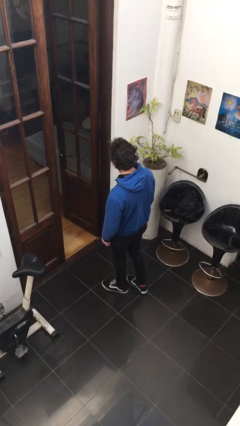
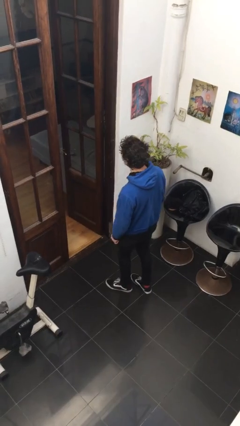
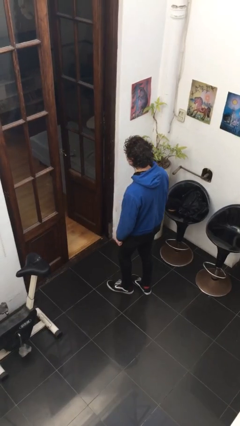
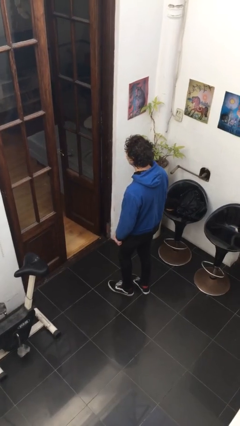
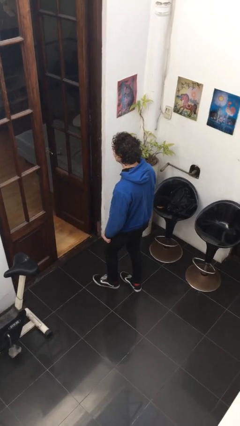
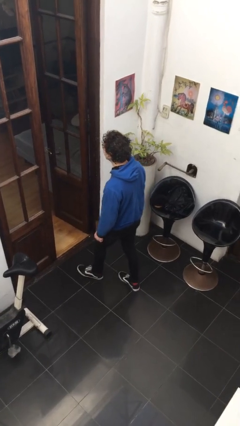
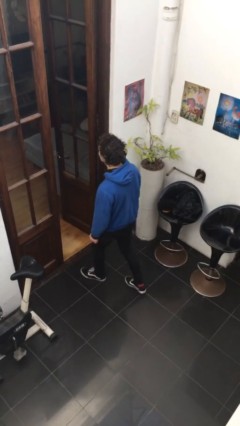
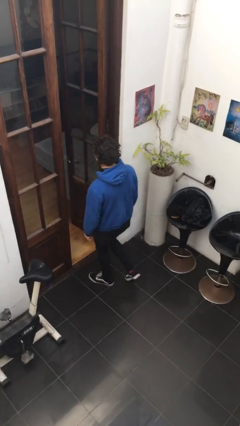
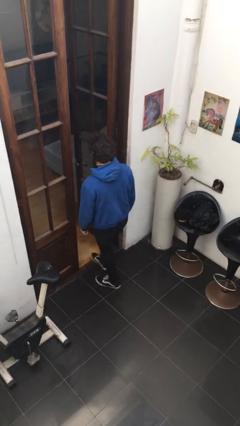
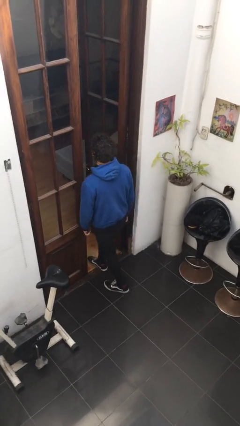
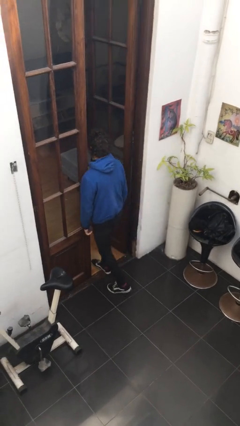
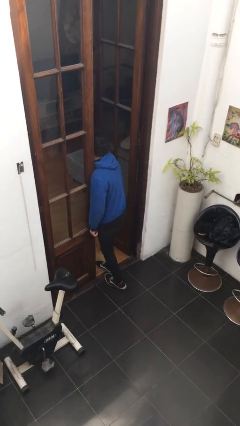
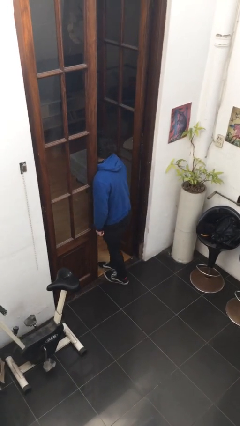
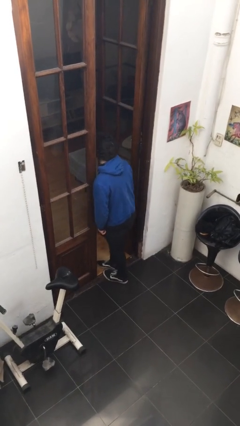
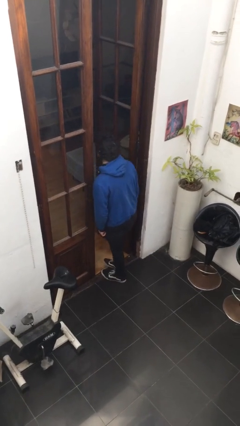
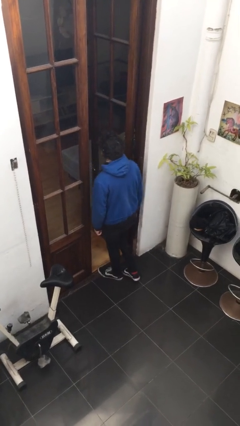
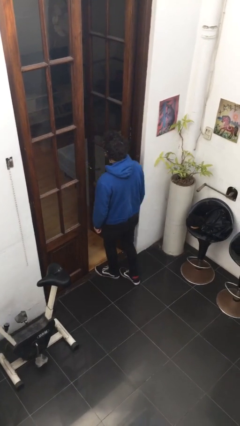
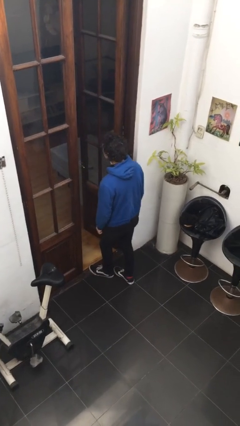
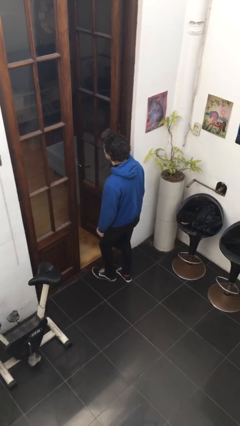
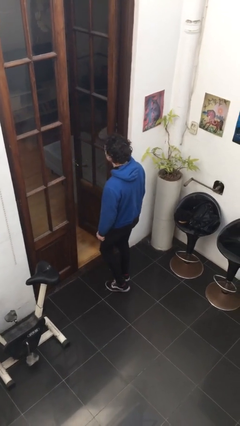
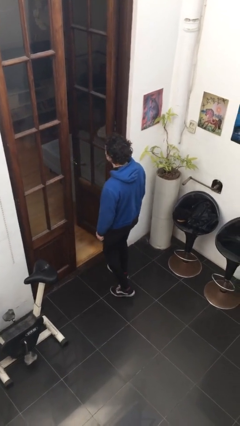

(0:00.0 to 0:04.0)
person bumps into wall

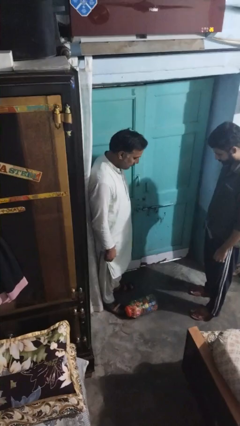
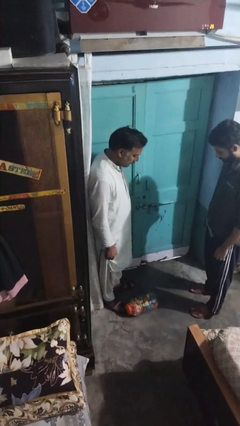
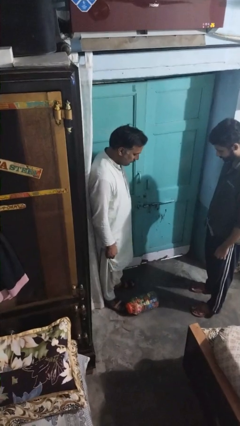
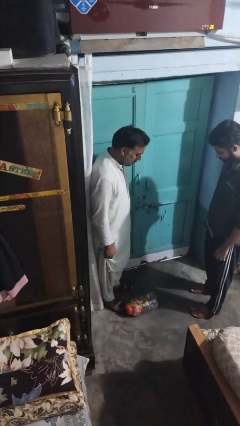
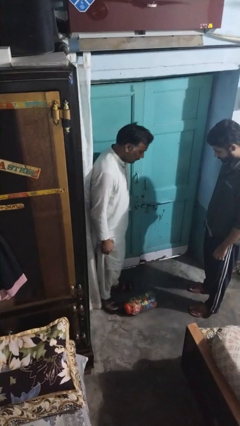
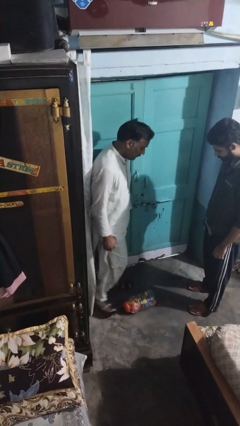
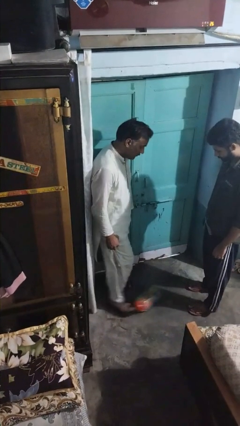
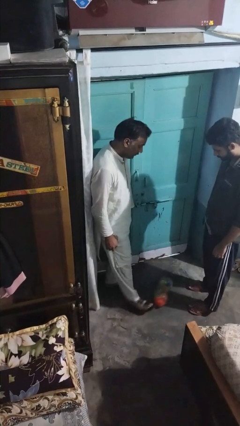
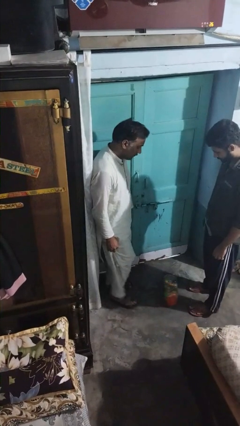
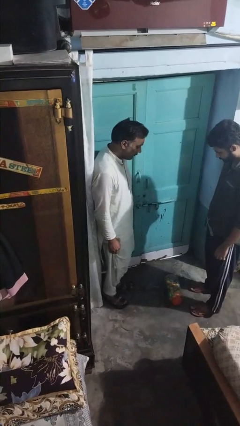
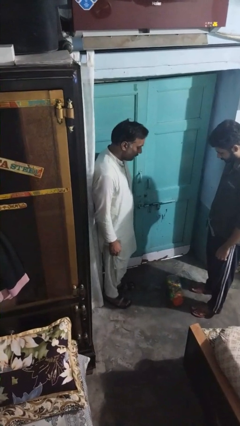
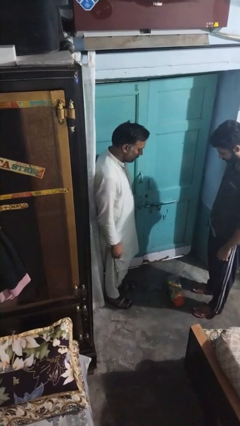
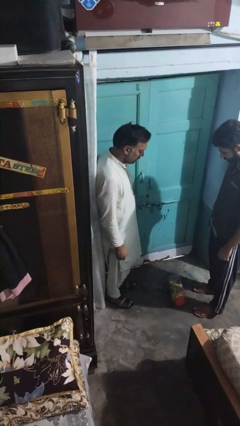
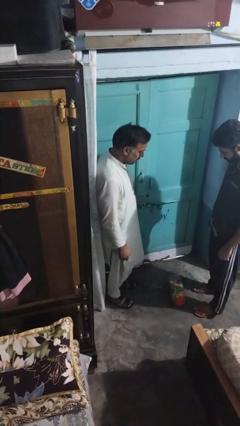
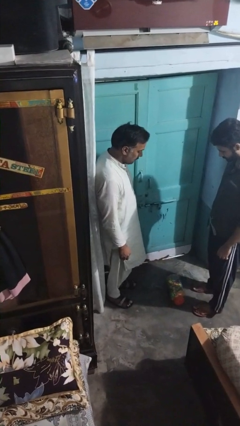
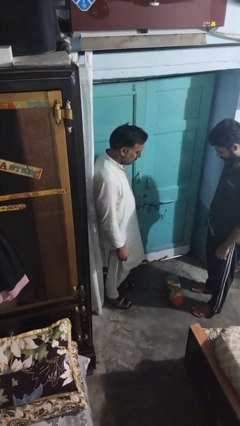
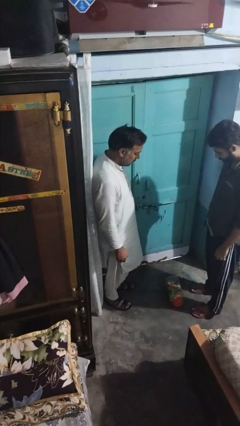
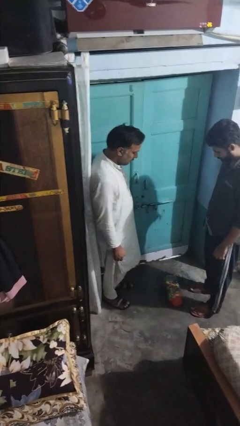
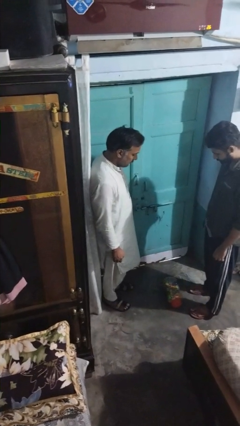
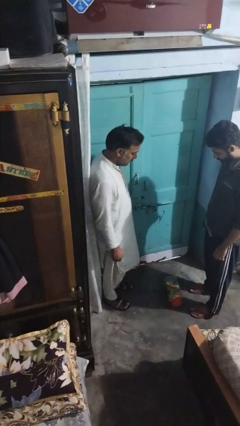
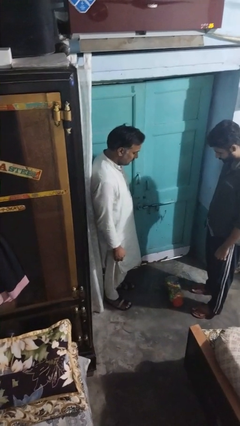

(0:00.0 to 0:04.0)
person kicks object to person

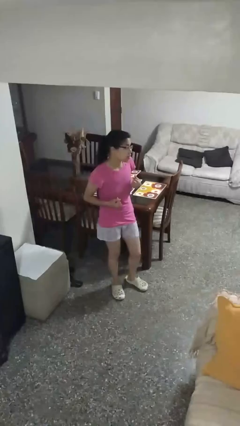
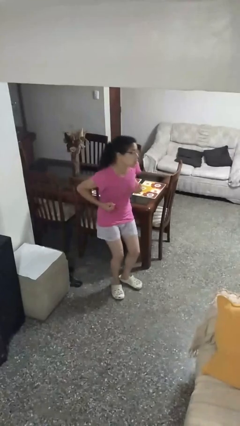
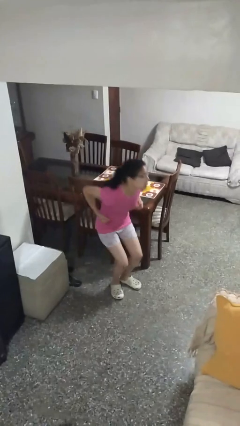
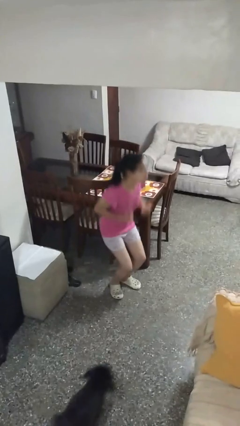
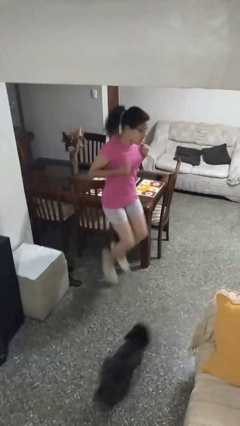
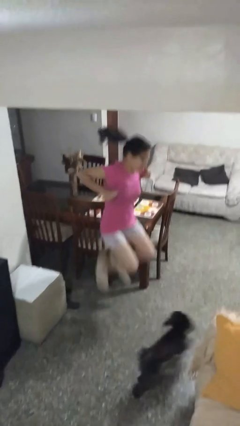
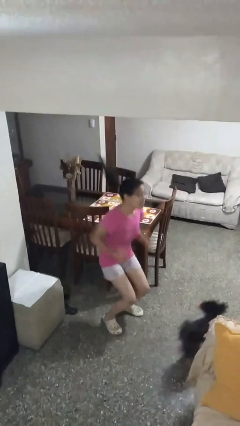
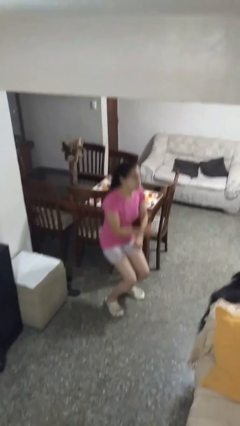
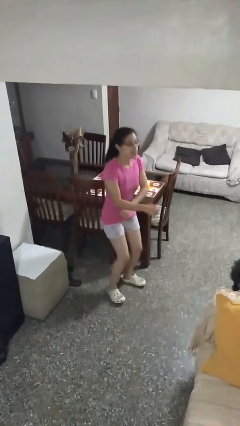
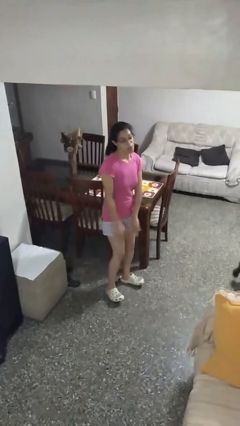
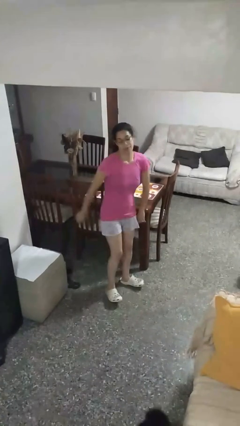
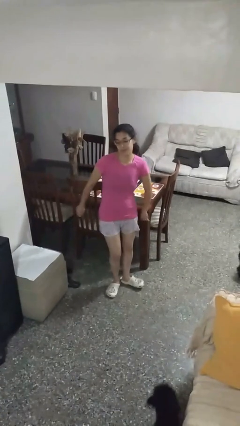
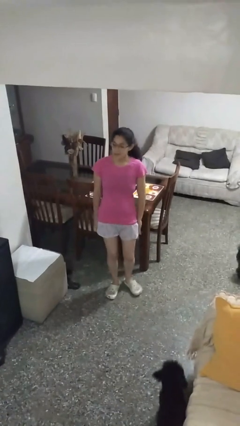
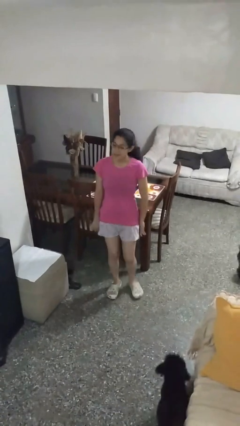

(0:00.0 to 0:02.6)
person jumps

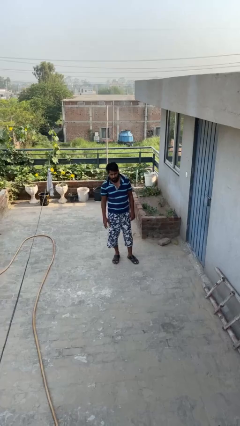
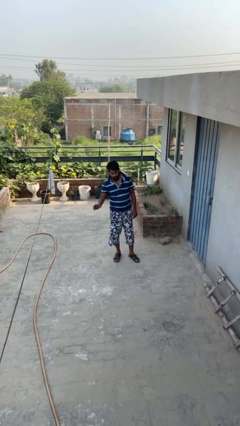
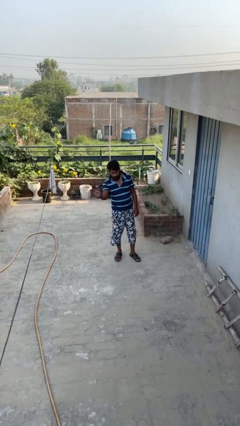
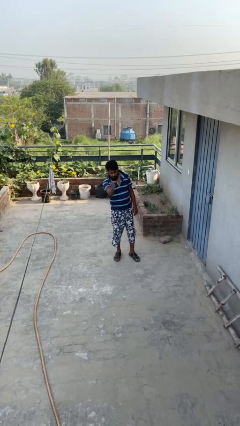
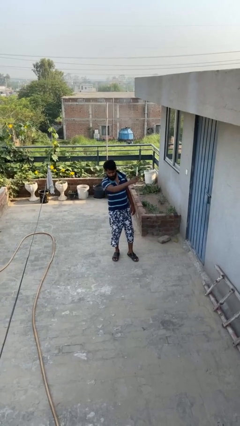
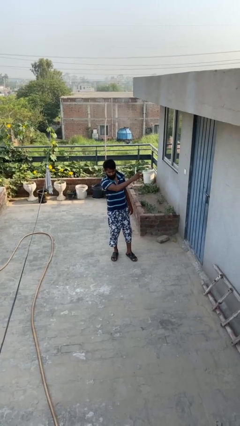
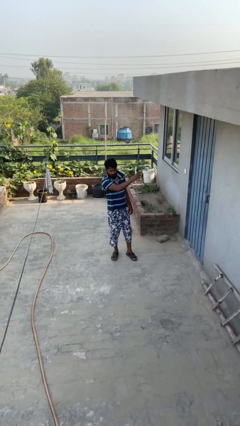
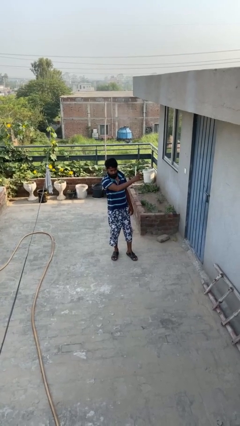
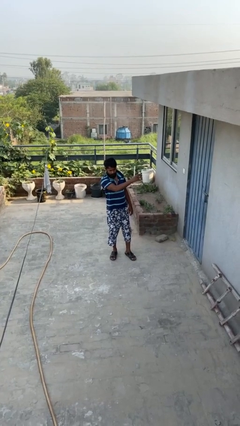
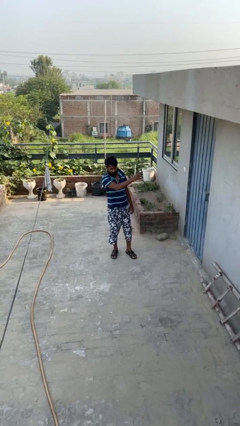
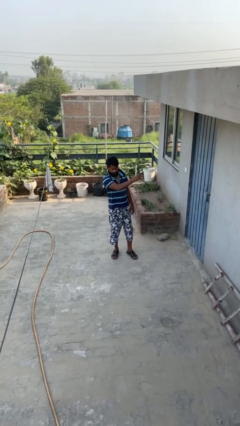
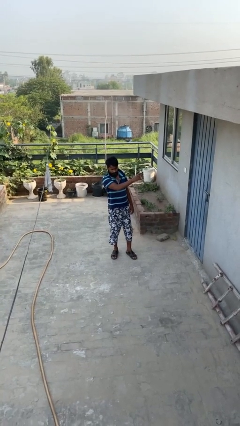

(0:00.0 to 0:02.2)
person gestures swipe left

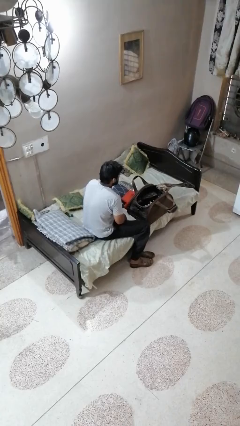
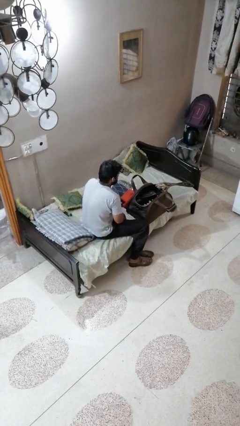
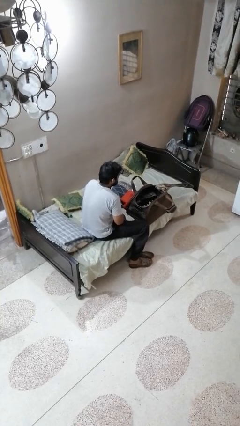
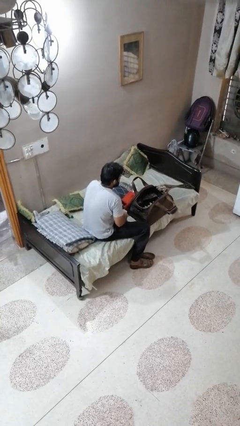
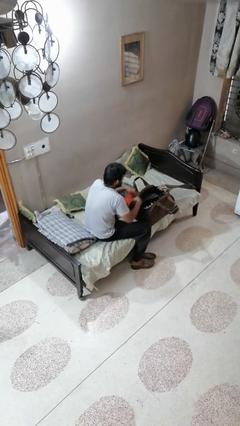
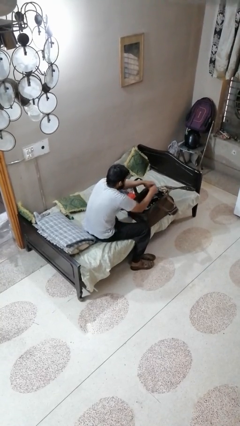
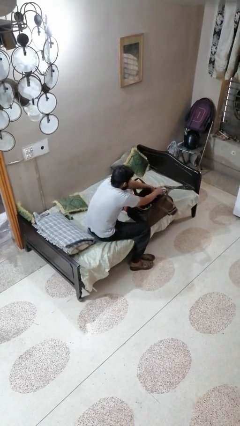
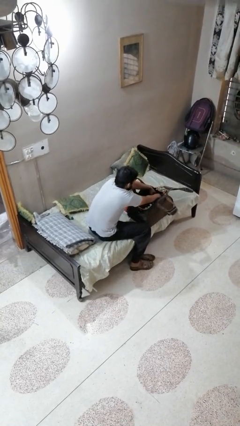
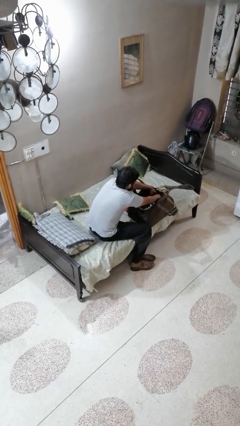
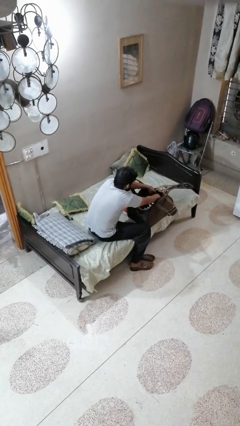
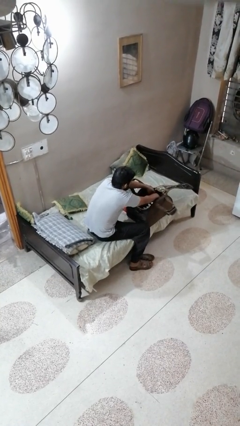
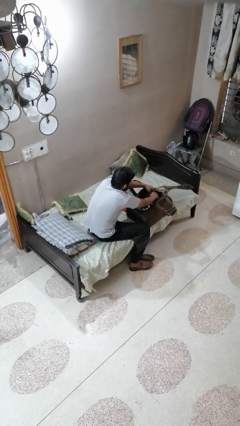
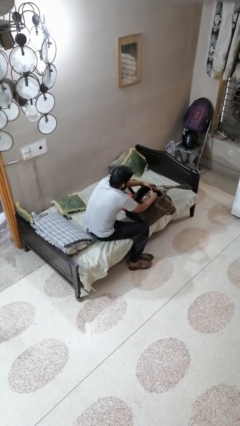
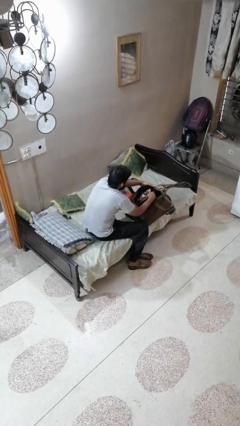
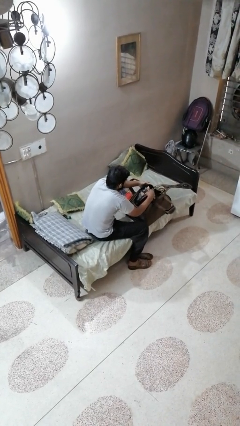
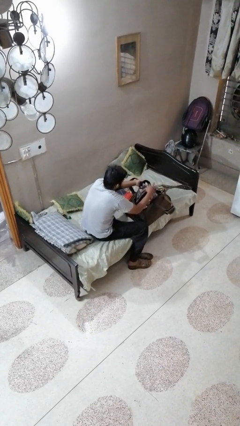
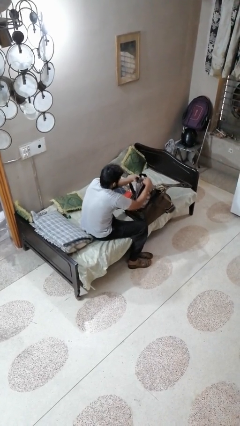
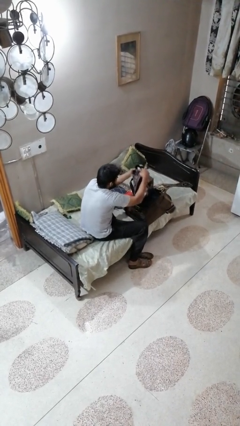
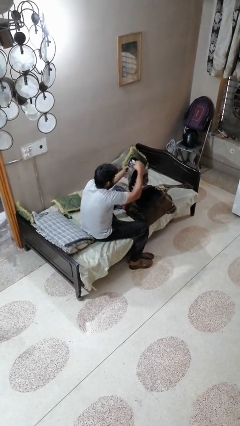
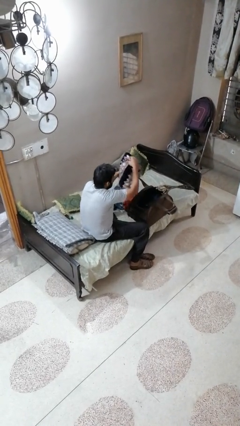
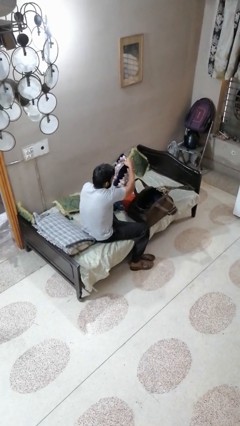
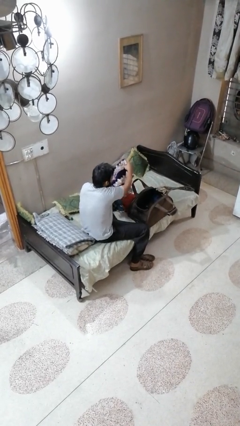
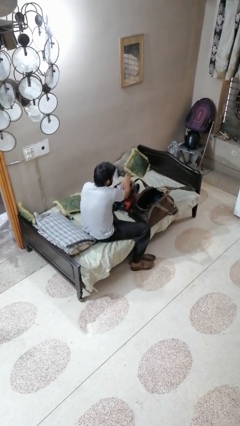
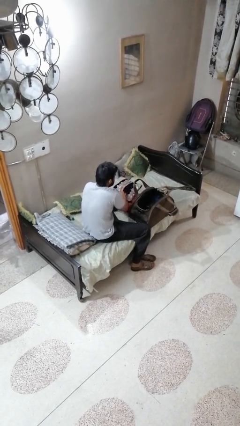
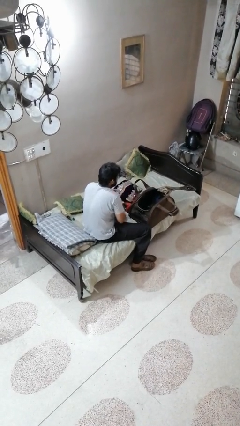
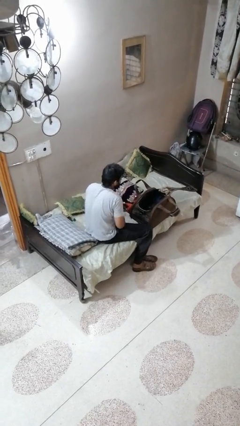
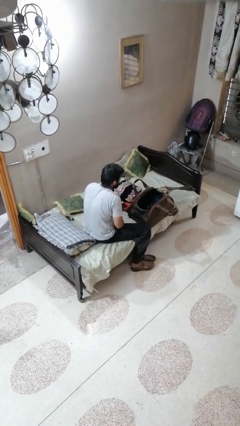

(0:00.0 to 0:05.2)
person unloads clothes from suitcase
